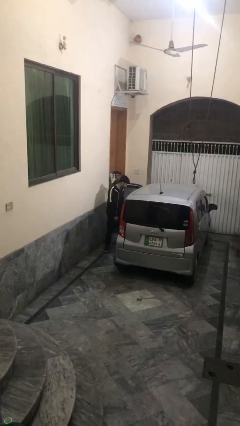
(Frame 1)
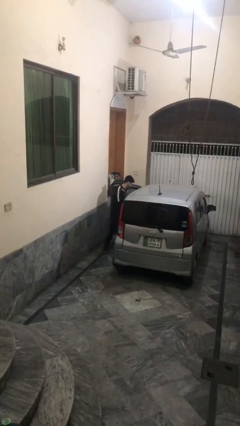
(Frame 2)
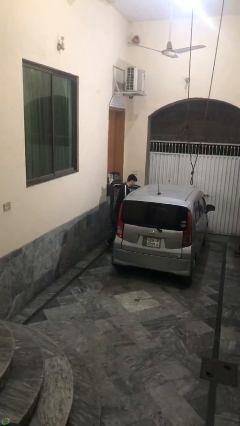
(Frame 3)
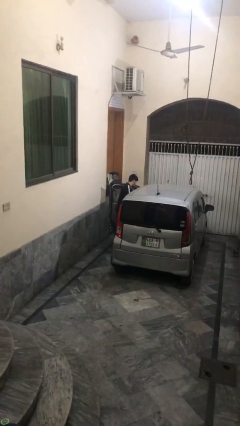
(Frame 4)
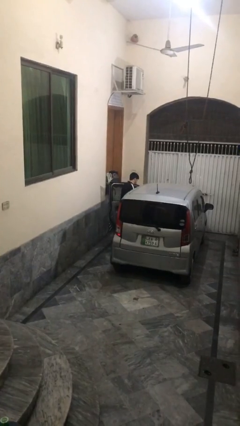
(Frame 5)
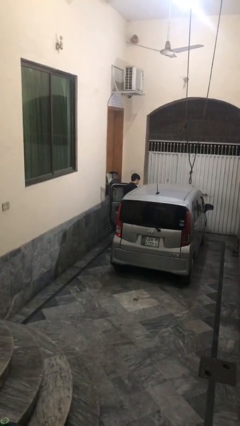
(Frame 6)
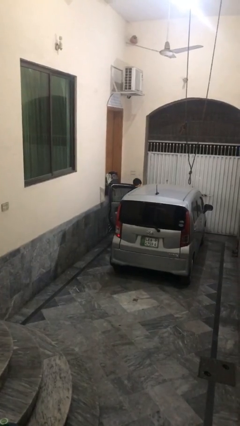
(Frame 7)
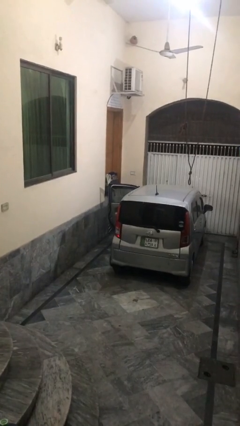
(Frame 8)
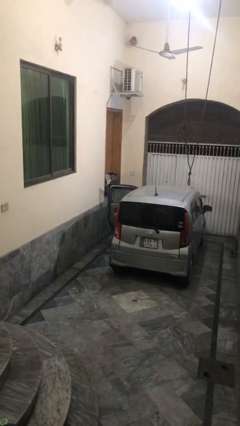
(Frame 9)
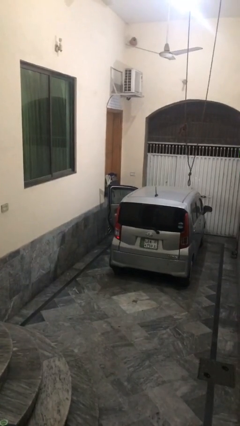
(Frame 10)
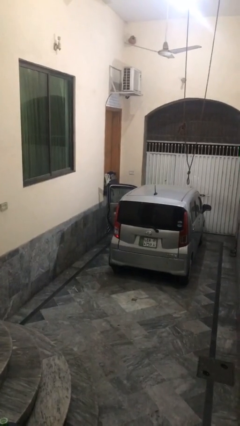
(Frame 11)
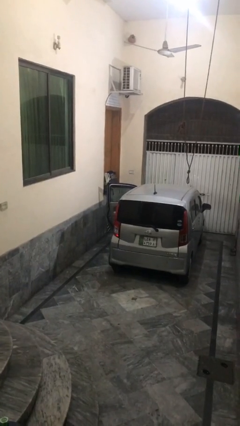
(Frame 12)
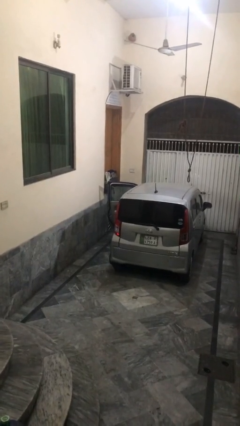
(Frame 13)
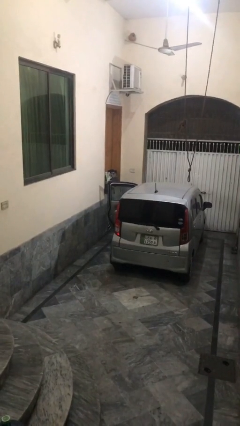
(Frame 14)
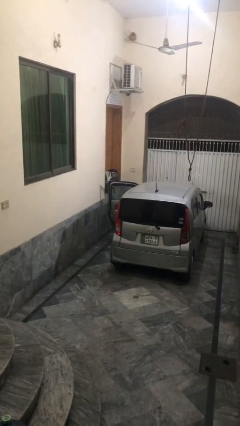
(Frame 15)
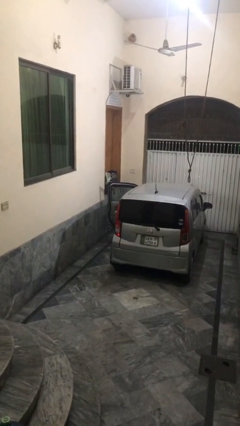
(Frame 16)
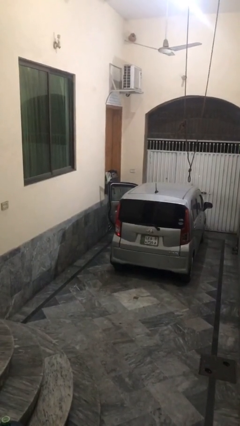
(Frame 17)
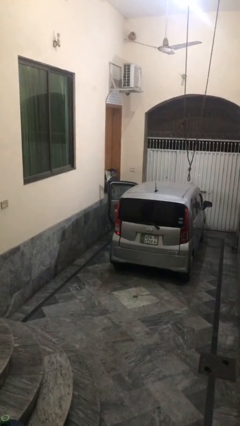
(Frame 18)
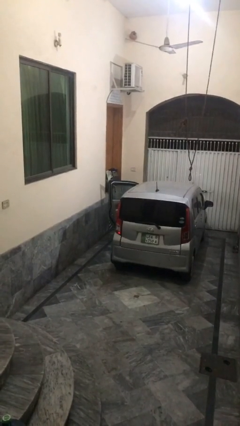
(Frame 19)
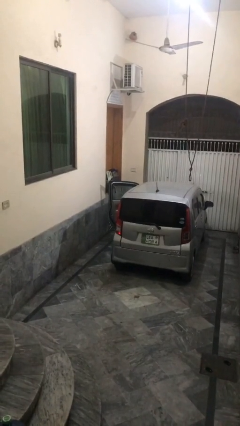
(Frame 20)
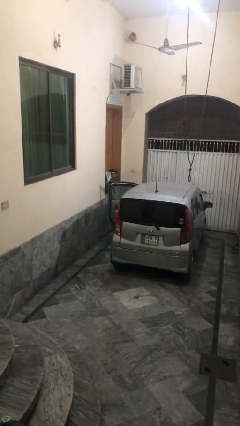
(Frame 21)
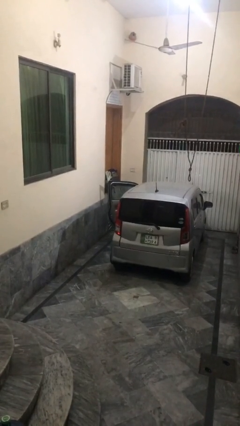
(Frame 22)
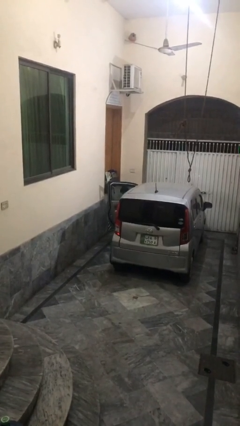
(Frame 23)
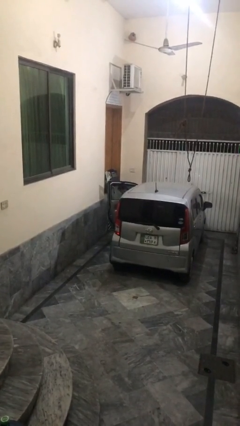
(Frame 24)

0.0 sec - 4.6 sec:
person enters car

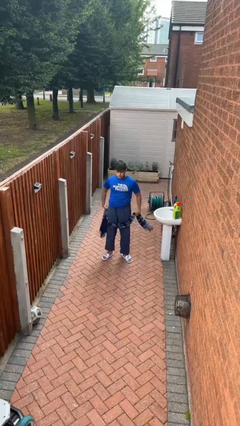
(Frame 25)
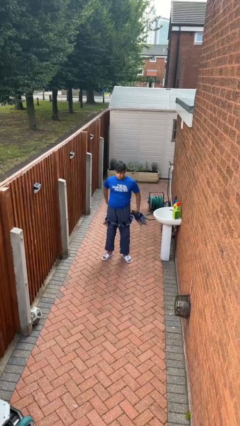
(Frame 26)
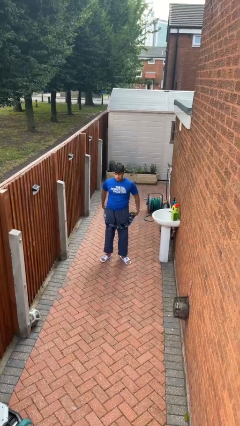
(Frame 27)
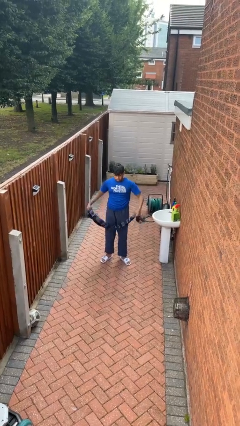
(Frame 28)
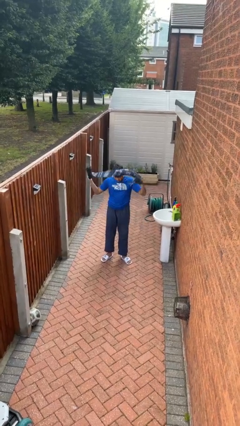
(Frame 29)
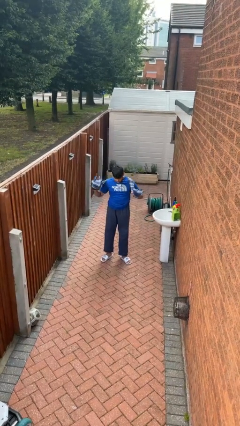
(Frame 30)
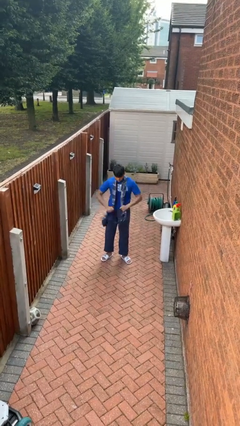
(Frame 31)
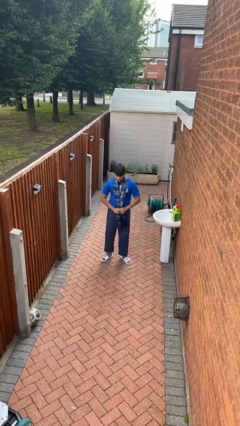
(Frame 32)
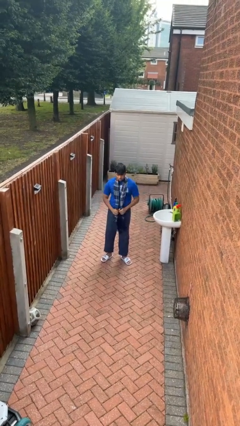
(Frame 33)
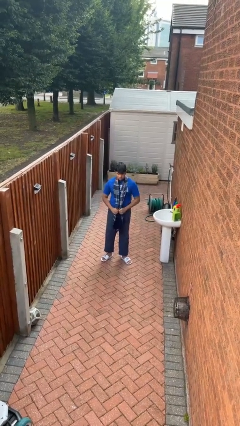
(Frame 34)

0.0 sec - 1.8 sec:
person puts on scarf

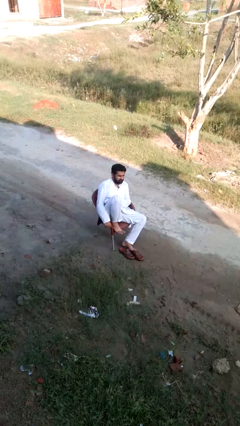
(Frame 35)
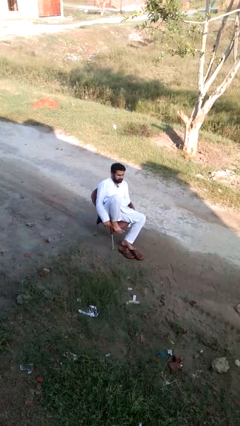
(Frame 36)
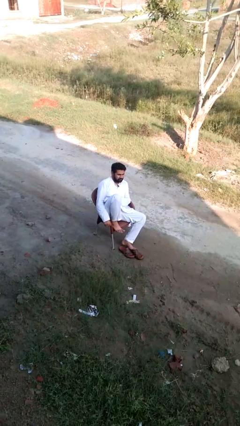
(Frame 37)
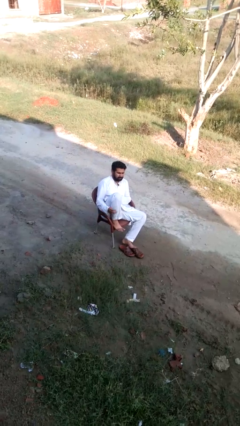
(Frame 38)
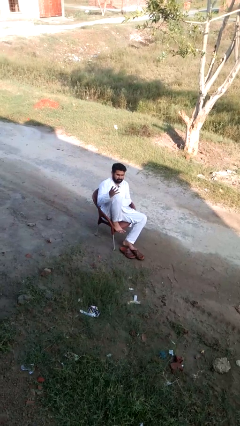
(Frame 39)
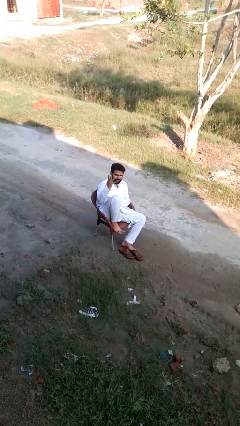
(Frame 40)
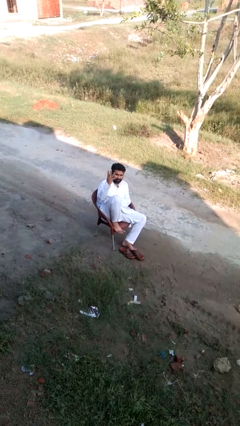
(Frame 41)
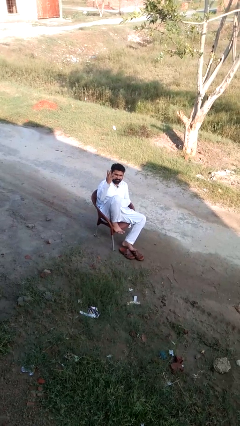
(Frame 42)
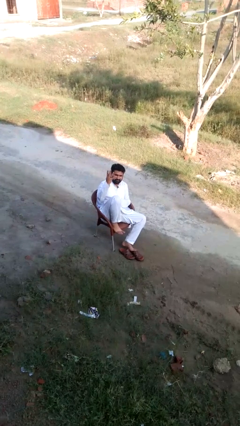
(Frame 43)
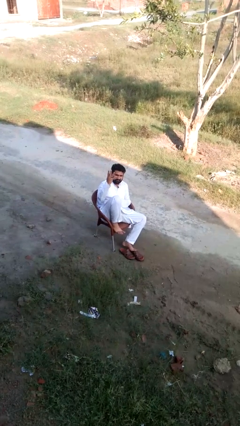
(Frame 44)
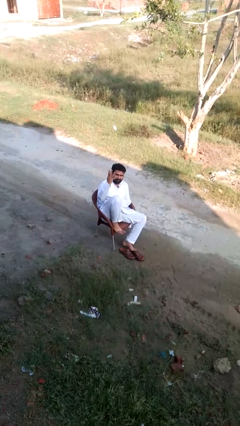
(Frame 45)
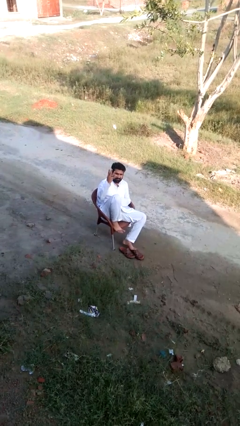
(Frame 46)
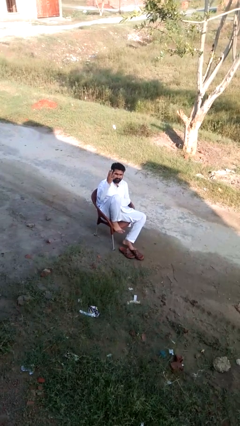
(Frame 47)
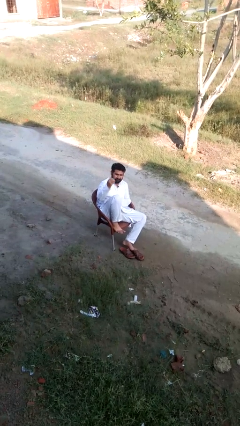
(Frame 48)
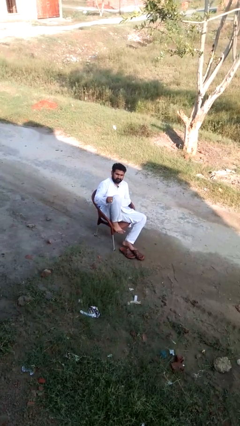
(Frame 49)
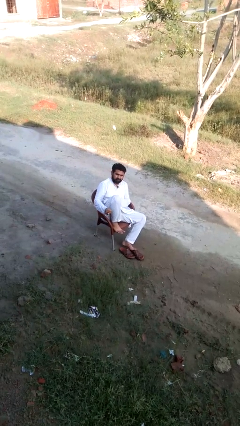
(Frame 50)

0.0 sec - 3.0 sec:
person gestures number four

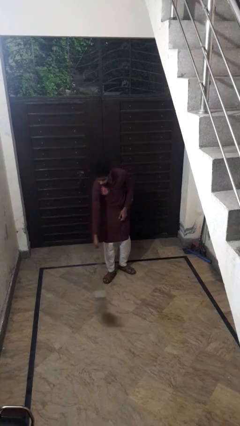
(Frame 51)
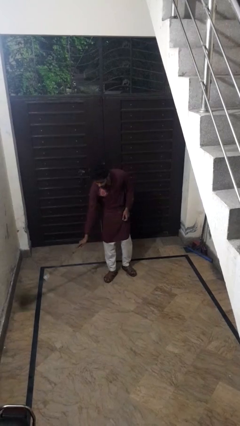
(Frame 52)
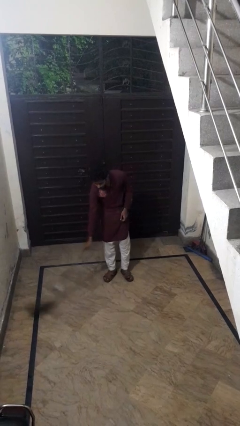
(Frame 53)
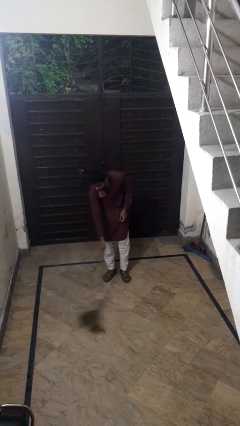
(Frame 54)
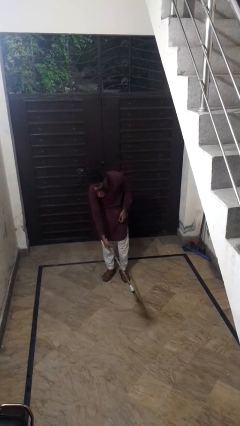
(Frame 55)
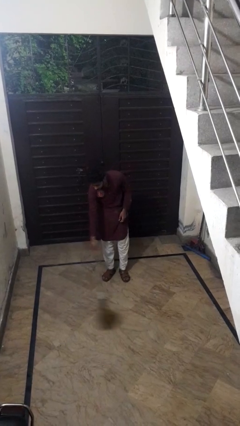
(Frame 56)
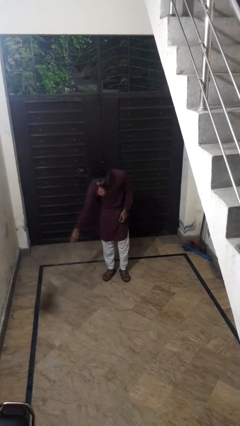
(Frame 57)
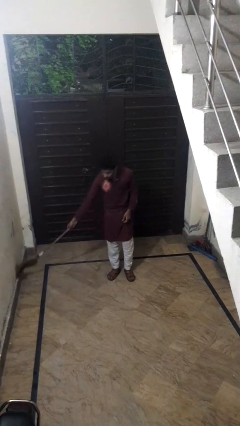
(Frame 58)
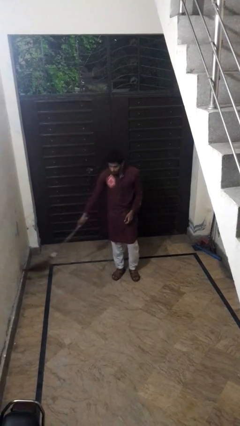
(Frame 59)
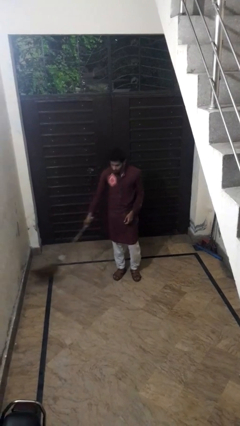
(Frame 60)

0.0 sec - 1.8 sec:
person sweeps floor

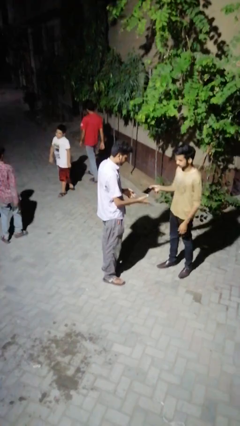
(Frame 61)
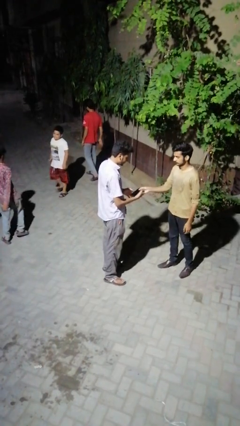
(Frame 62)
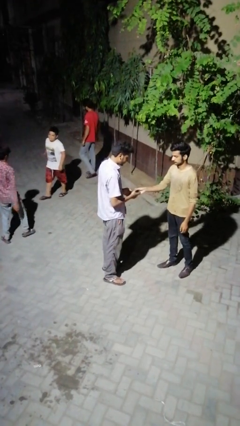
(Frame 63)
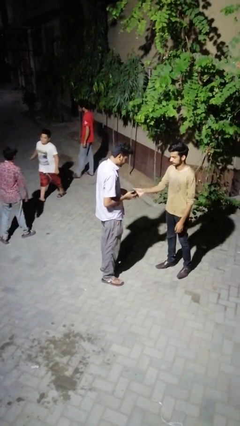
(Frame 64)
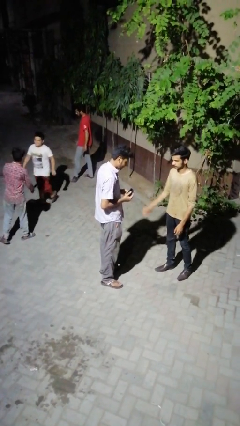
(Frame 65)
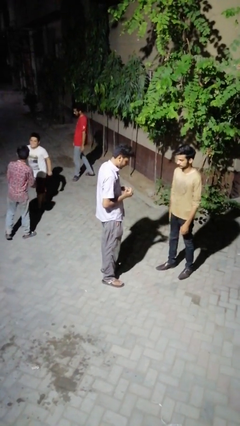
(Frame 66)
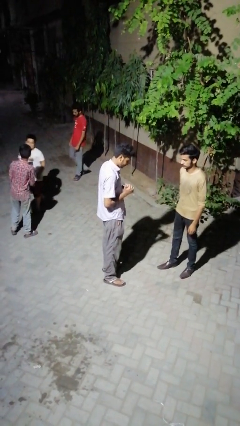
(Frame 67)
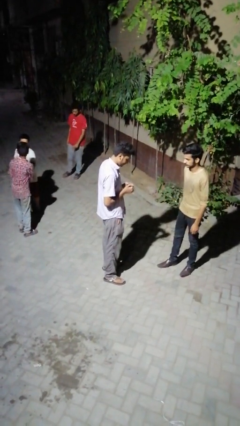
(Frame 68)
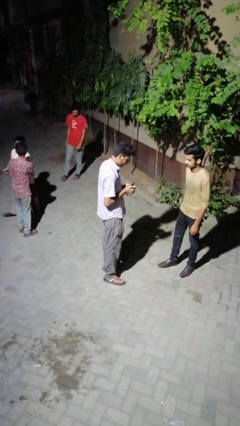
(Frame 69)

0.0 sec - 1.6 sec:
person transfers object to person

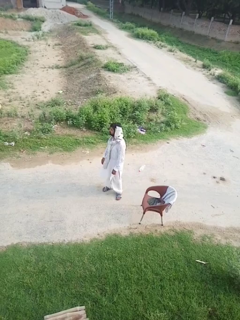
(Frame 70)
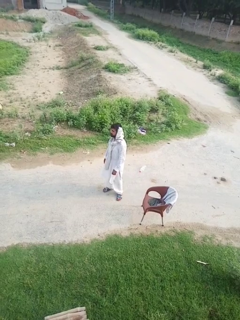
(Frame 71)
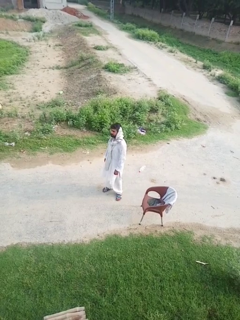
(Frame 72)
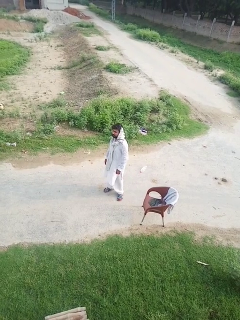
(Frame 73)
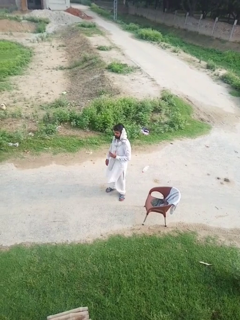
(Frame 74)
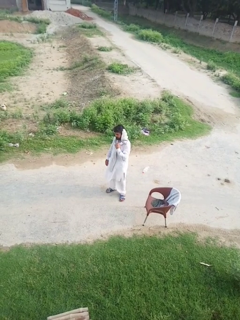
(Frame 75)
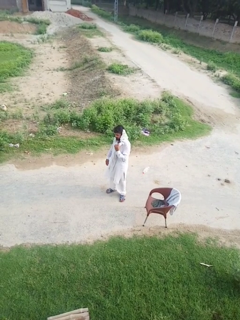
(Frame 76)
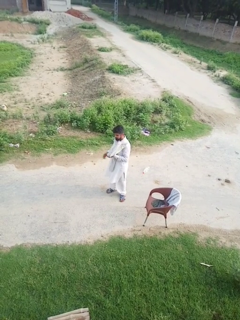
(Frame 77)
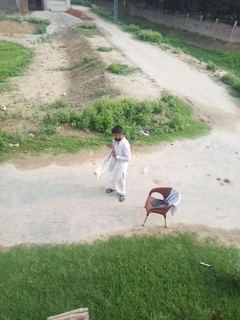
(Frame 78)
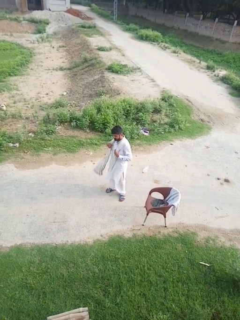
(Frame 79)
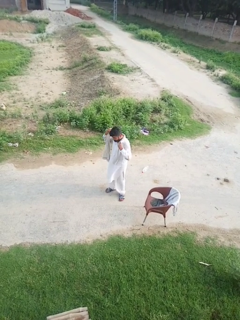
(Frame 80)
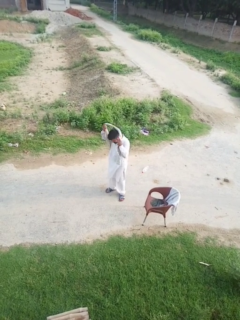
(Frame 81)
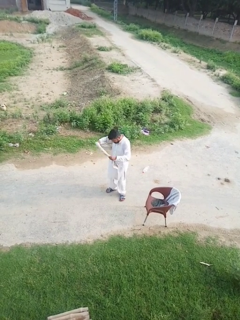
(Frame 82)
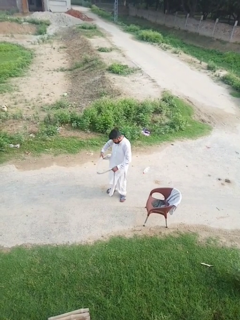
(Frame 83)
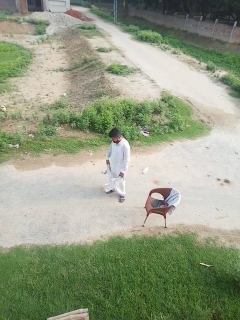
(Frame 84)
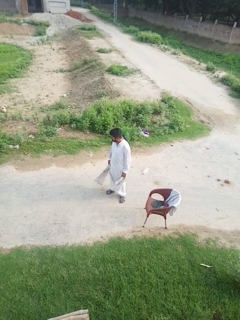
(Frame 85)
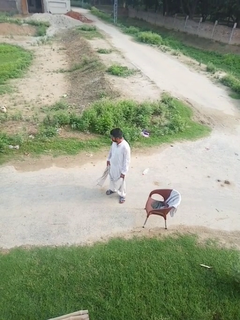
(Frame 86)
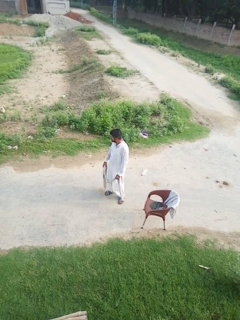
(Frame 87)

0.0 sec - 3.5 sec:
person takes off scarf

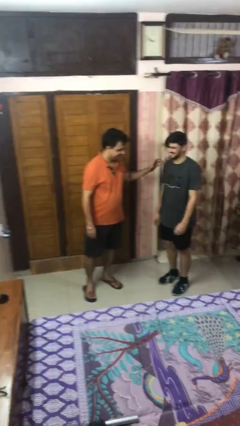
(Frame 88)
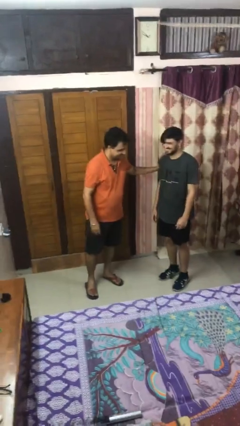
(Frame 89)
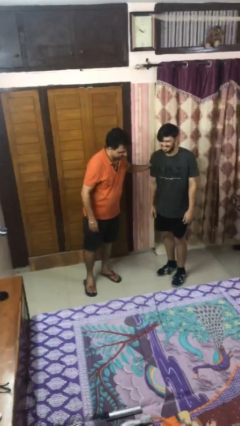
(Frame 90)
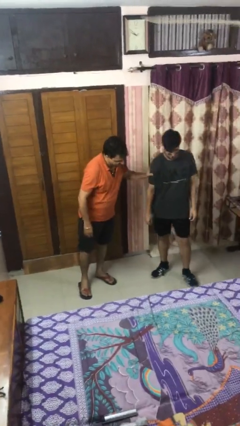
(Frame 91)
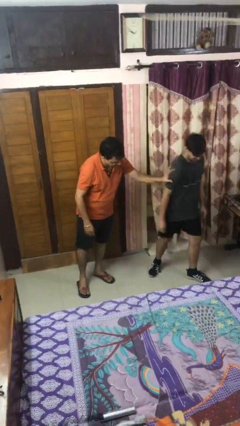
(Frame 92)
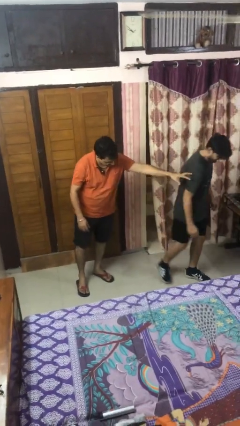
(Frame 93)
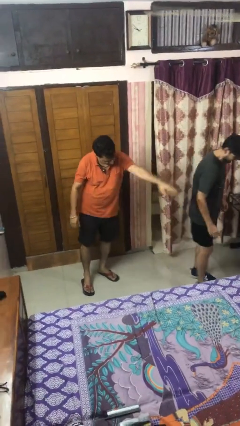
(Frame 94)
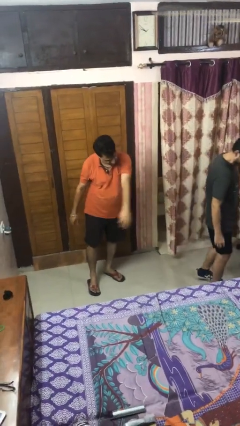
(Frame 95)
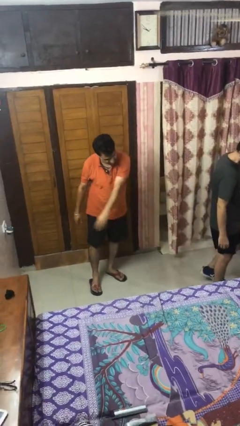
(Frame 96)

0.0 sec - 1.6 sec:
person shoves person
